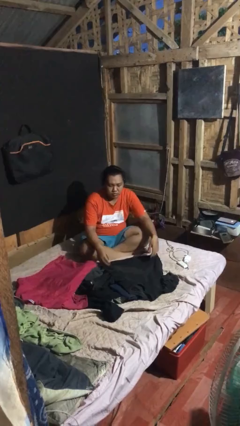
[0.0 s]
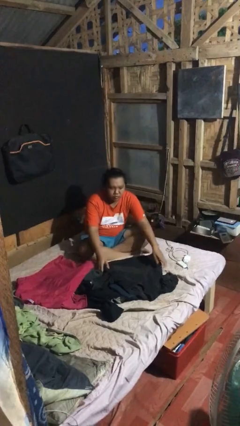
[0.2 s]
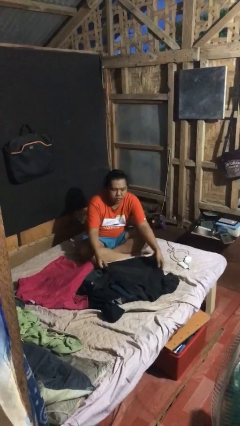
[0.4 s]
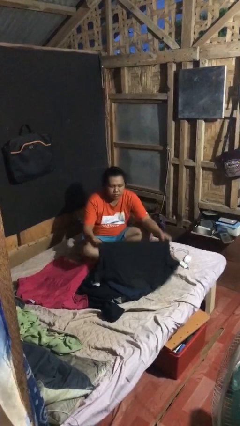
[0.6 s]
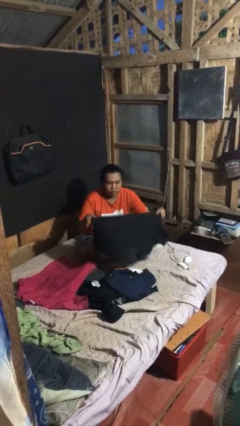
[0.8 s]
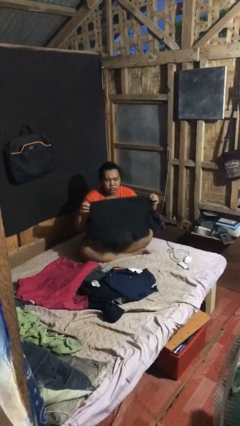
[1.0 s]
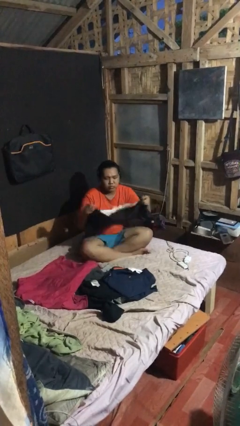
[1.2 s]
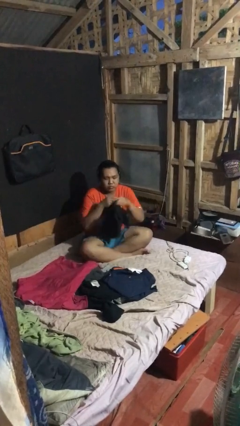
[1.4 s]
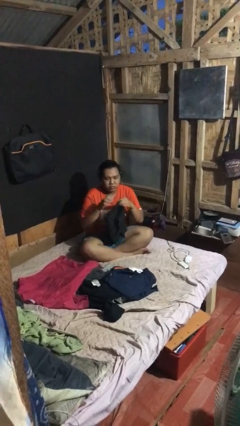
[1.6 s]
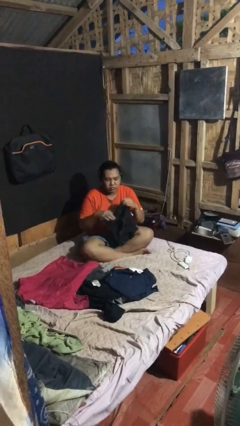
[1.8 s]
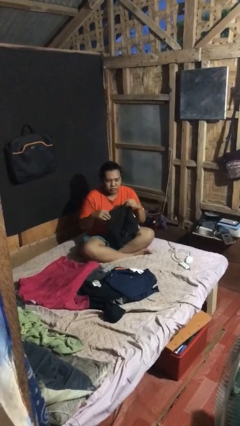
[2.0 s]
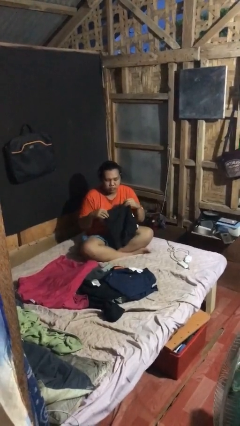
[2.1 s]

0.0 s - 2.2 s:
person folds shirt

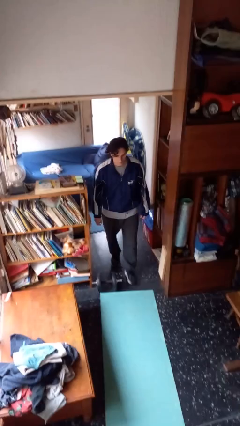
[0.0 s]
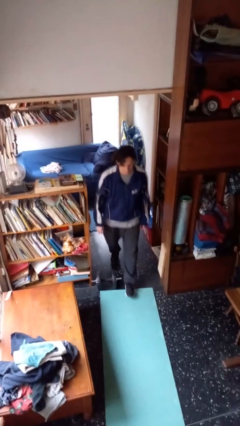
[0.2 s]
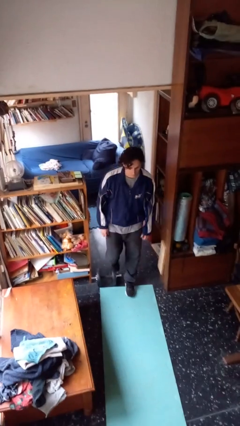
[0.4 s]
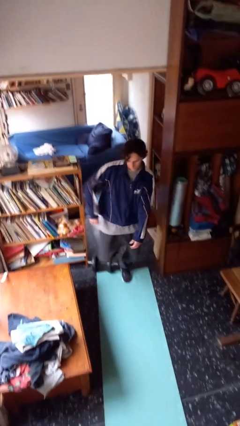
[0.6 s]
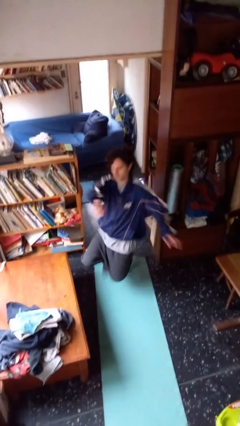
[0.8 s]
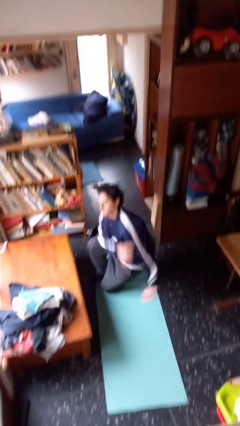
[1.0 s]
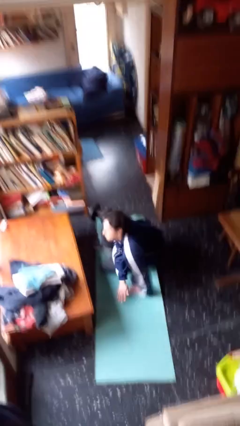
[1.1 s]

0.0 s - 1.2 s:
person trips on object on floor

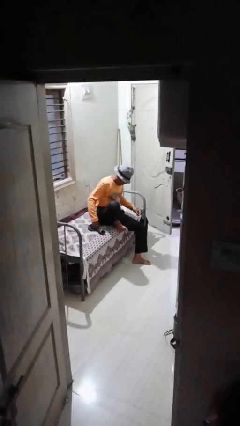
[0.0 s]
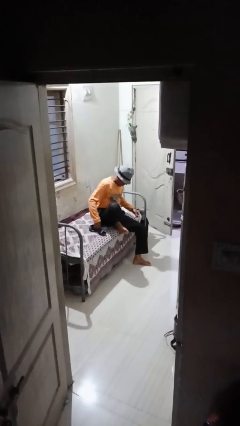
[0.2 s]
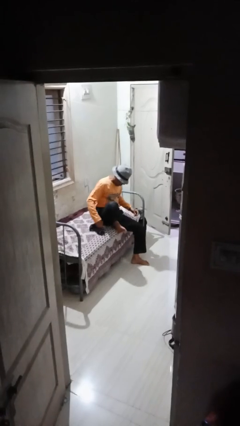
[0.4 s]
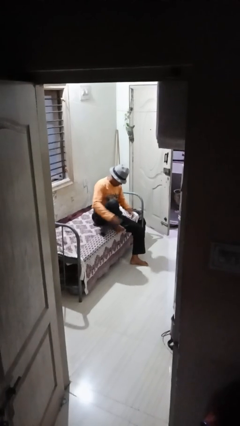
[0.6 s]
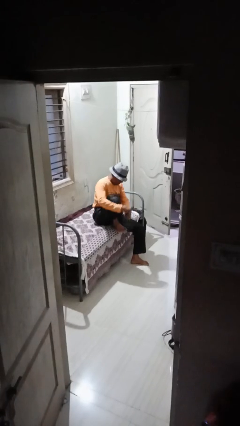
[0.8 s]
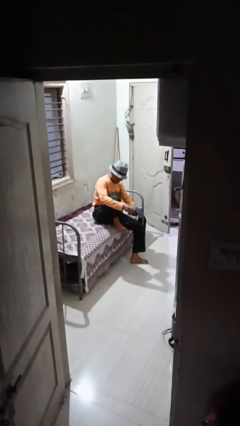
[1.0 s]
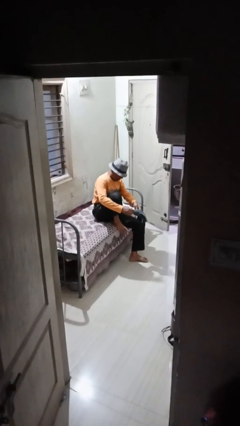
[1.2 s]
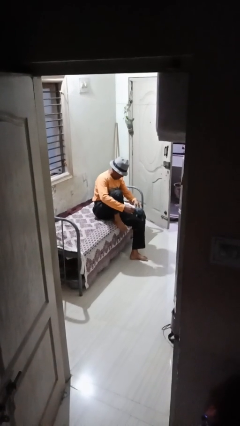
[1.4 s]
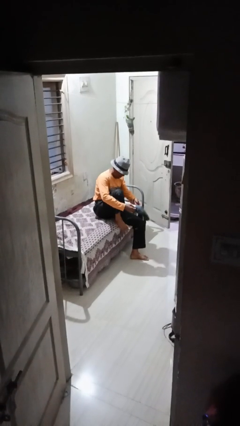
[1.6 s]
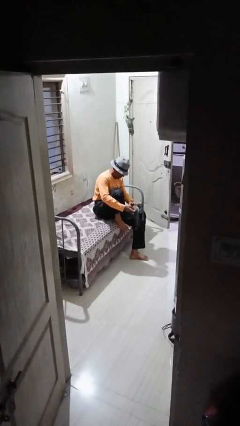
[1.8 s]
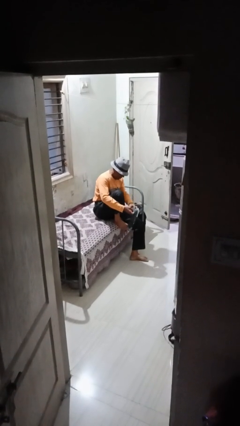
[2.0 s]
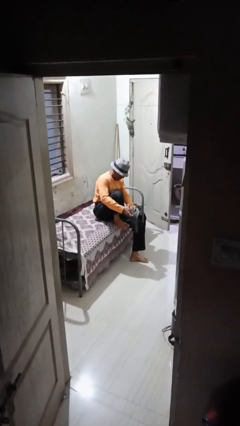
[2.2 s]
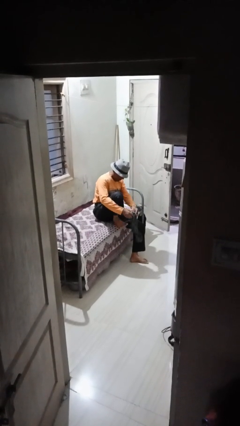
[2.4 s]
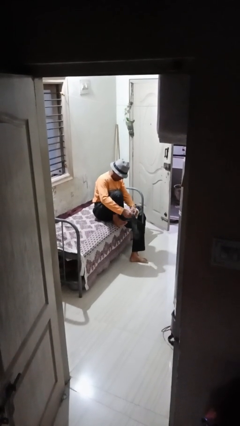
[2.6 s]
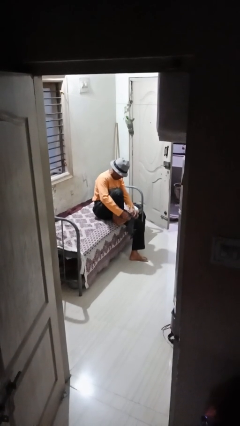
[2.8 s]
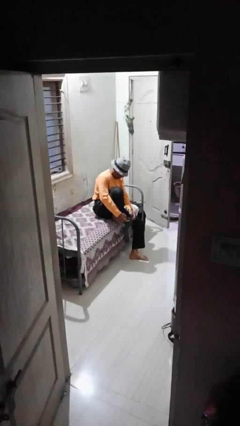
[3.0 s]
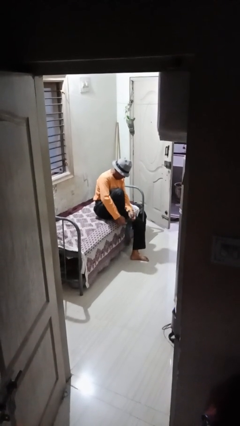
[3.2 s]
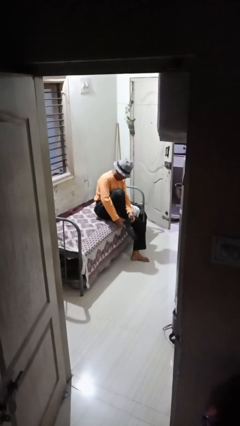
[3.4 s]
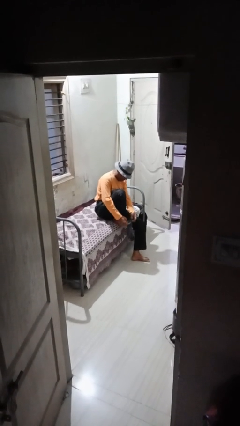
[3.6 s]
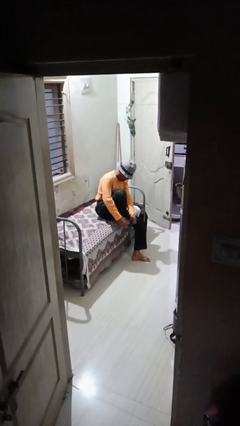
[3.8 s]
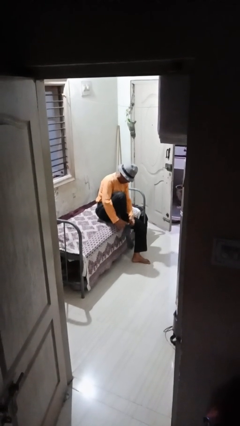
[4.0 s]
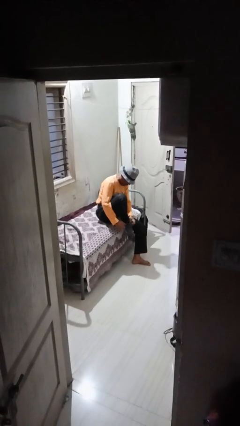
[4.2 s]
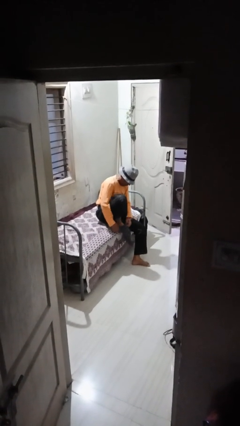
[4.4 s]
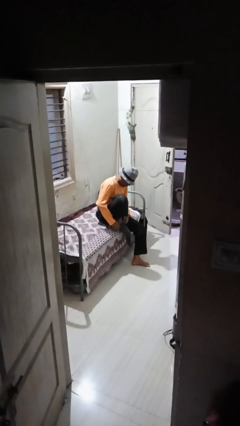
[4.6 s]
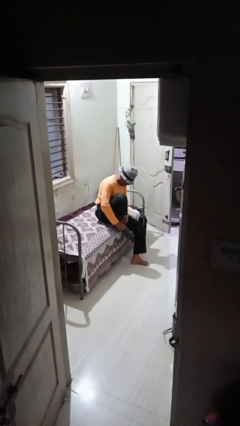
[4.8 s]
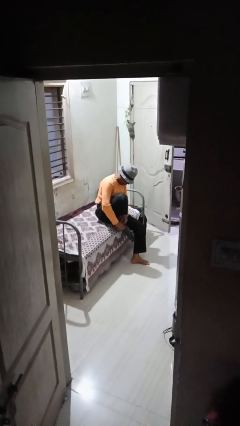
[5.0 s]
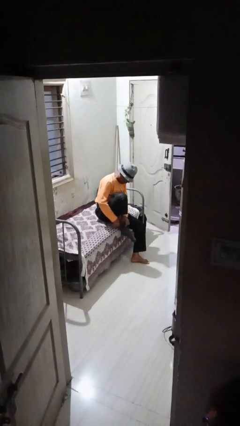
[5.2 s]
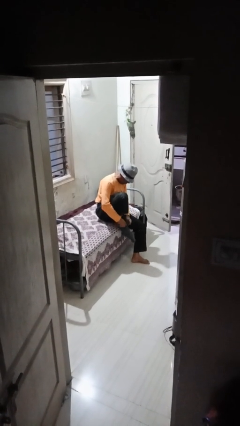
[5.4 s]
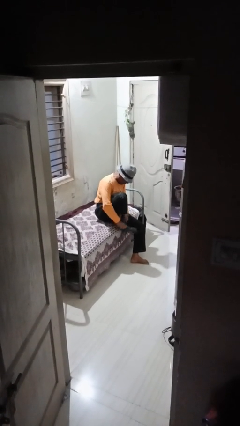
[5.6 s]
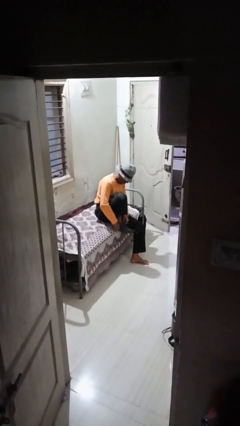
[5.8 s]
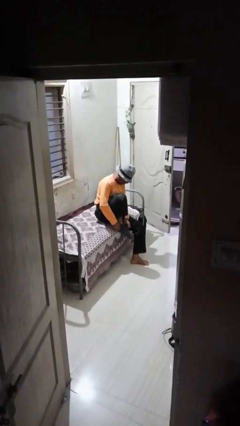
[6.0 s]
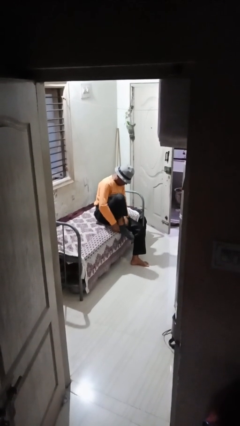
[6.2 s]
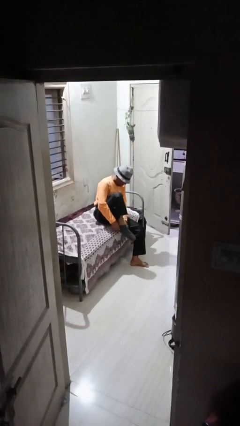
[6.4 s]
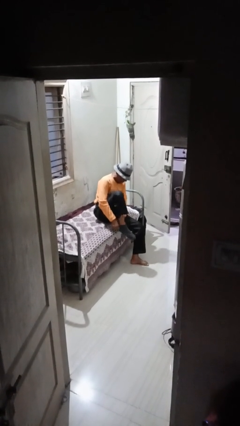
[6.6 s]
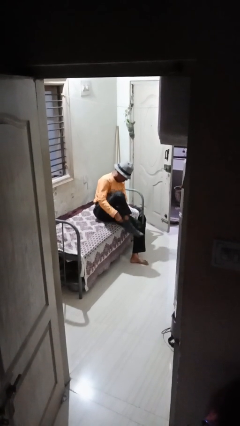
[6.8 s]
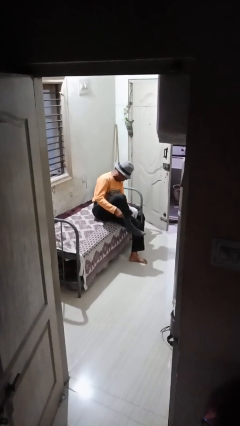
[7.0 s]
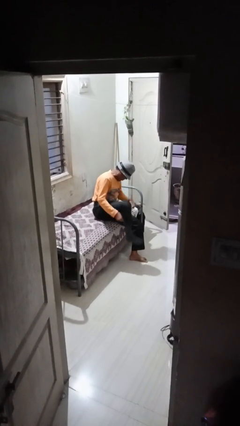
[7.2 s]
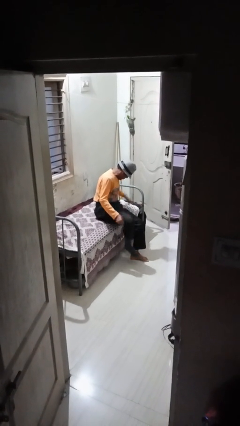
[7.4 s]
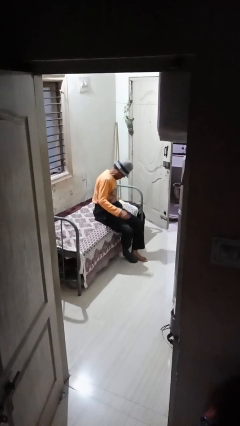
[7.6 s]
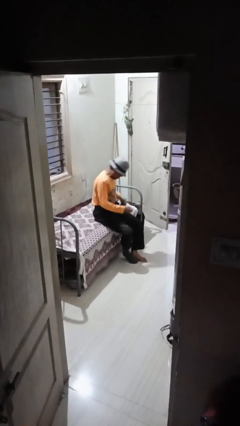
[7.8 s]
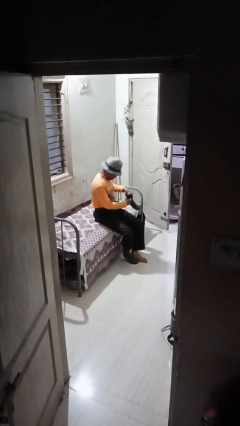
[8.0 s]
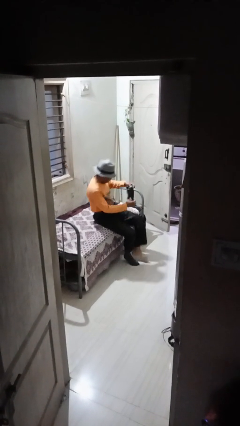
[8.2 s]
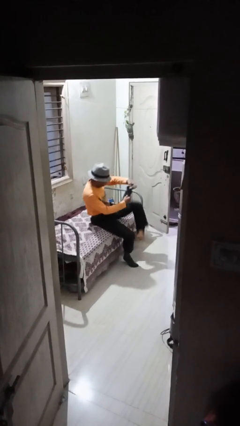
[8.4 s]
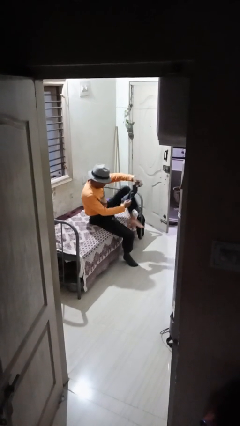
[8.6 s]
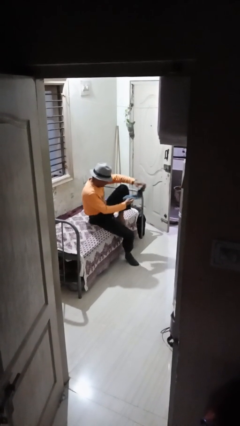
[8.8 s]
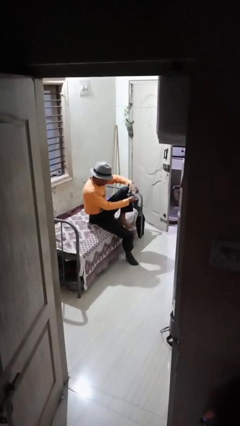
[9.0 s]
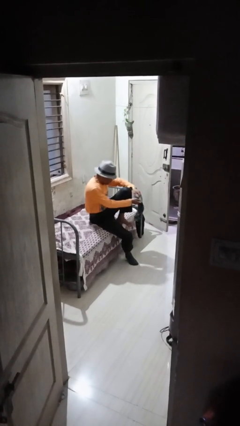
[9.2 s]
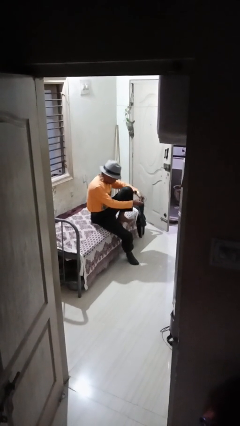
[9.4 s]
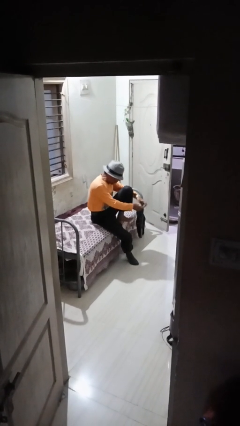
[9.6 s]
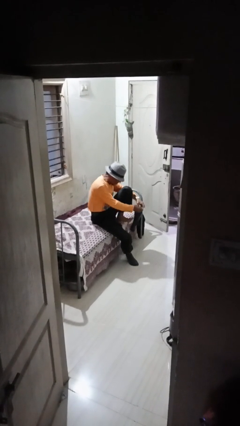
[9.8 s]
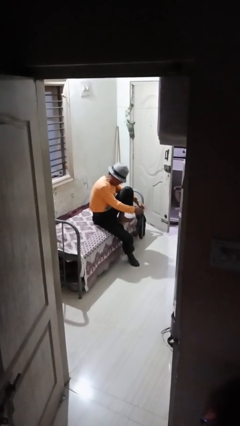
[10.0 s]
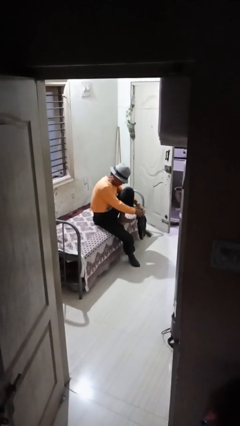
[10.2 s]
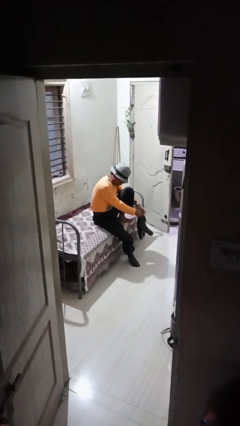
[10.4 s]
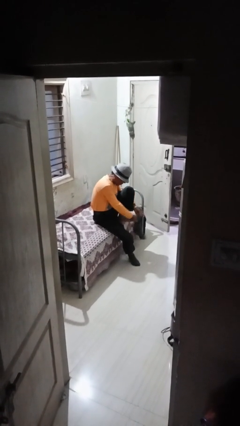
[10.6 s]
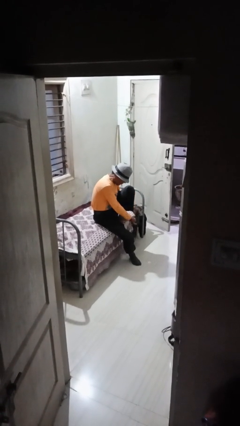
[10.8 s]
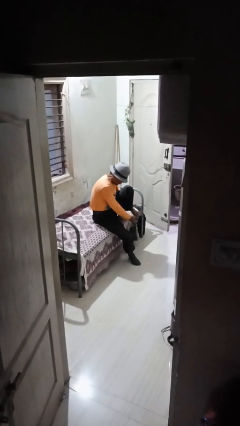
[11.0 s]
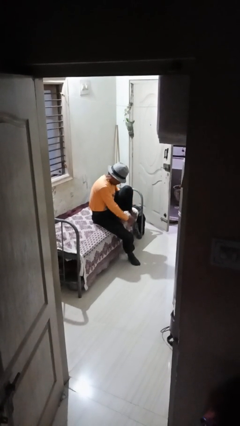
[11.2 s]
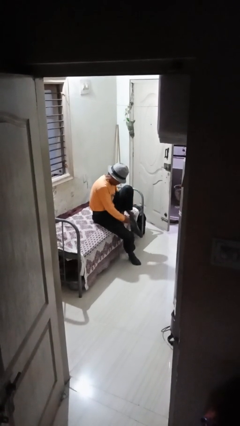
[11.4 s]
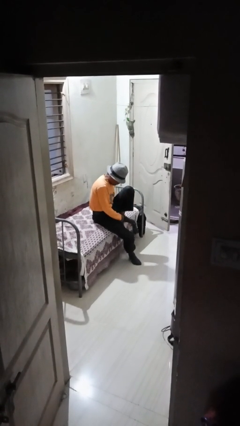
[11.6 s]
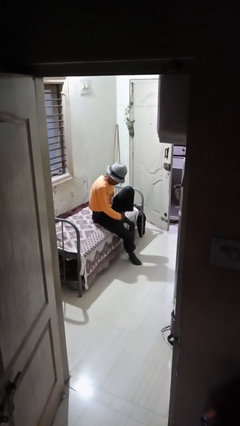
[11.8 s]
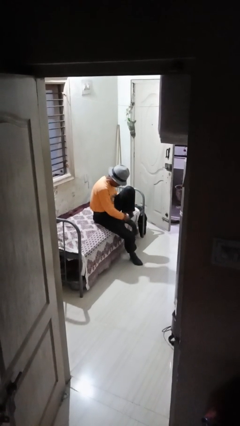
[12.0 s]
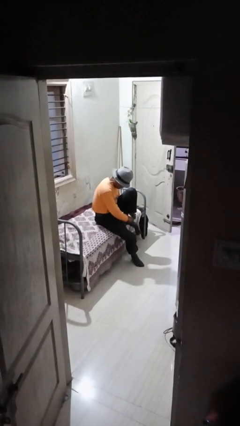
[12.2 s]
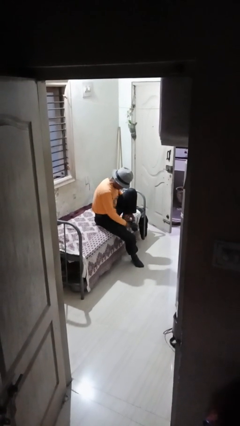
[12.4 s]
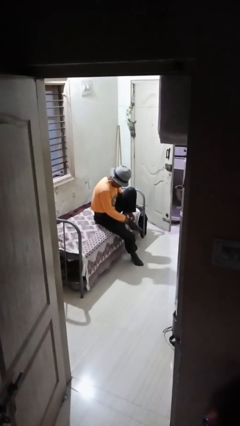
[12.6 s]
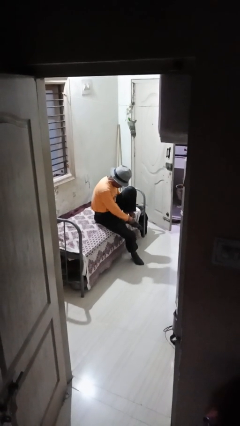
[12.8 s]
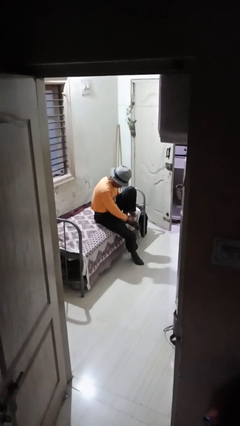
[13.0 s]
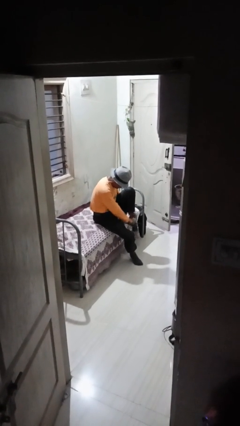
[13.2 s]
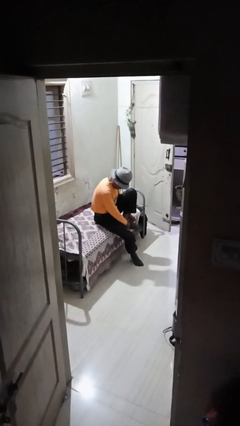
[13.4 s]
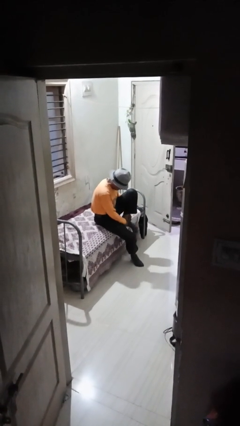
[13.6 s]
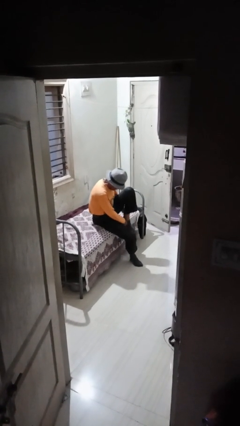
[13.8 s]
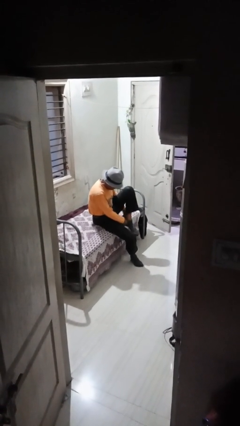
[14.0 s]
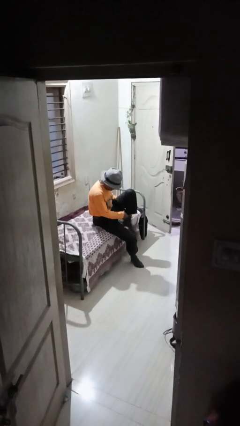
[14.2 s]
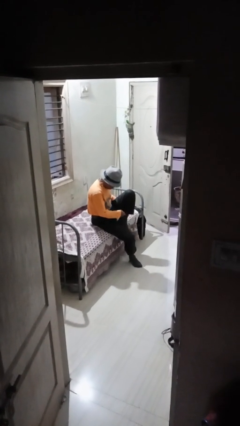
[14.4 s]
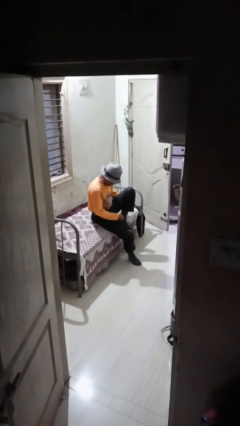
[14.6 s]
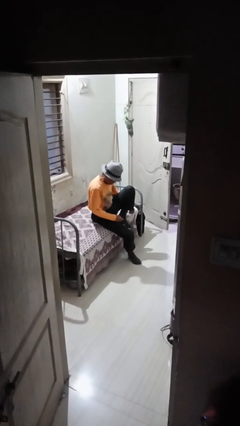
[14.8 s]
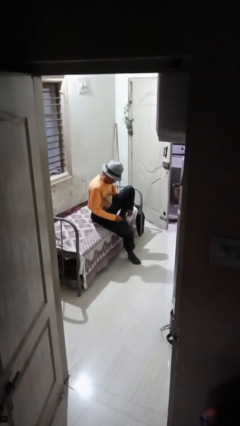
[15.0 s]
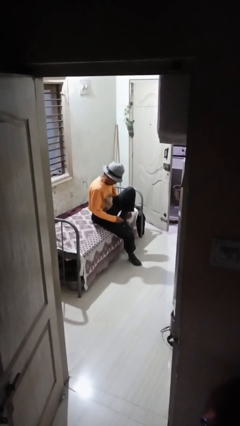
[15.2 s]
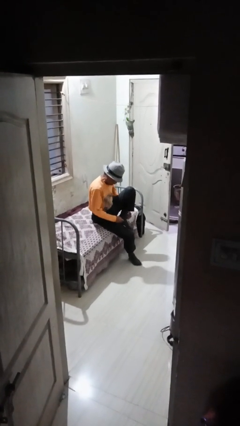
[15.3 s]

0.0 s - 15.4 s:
person puts on socks
